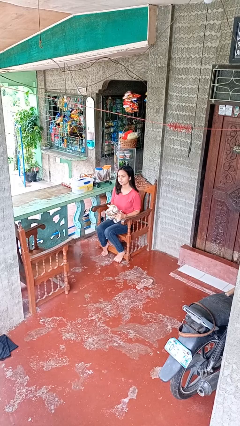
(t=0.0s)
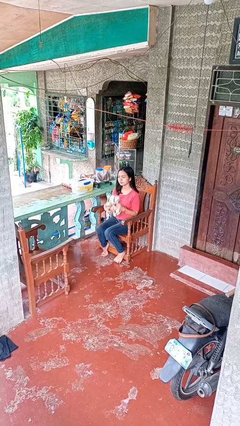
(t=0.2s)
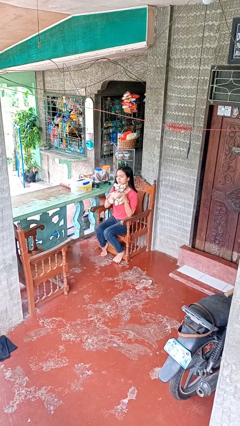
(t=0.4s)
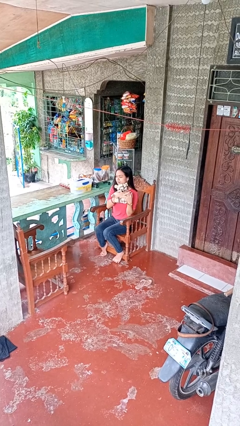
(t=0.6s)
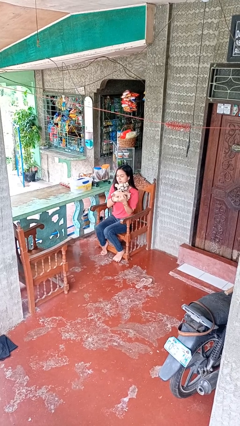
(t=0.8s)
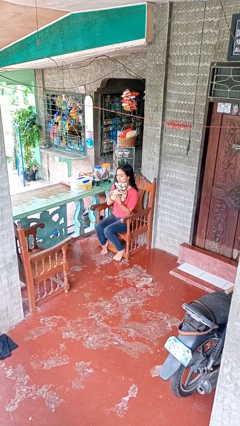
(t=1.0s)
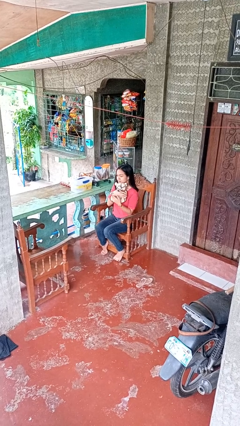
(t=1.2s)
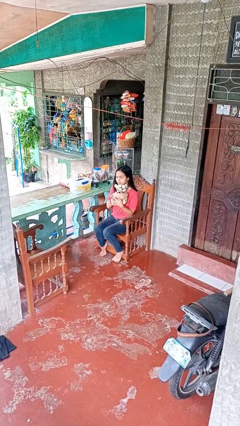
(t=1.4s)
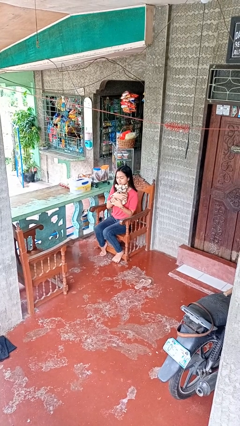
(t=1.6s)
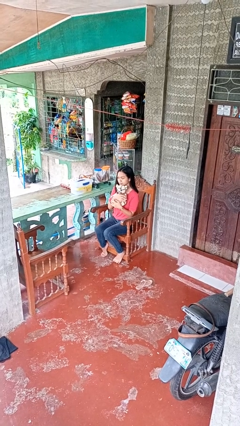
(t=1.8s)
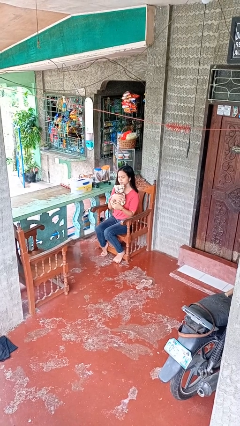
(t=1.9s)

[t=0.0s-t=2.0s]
person hugs stuffed animal

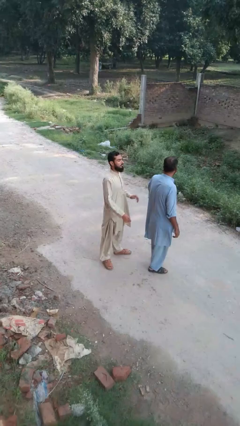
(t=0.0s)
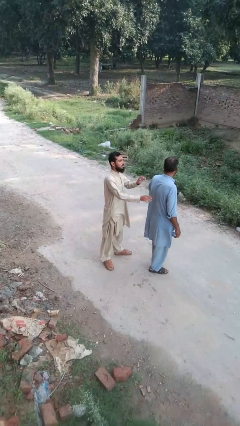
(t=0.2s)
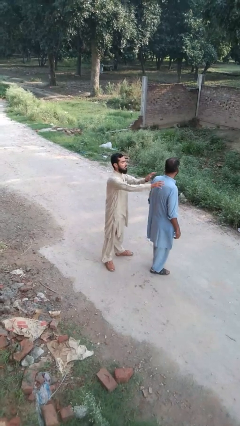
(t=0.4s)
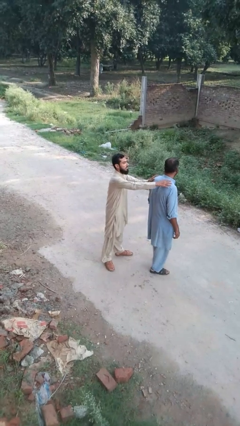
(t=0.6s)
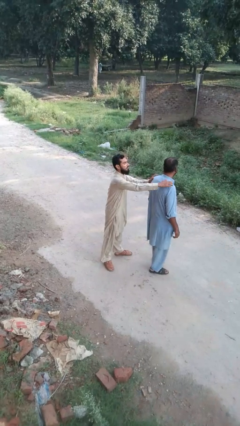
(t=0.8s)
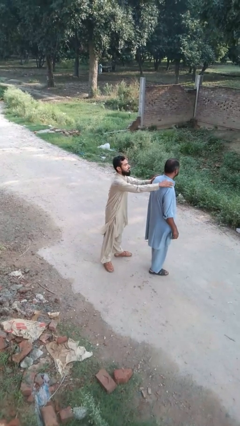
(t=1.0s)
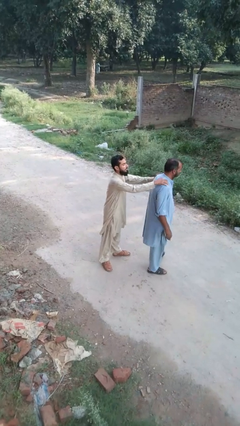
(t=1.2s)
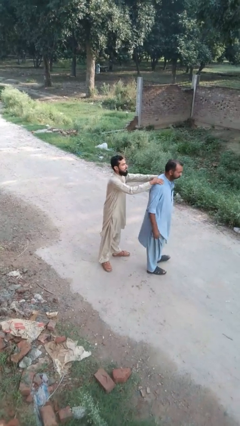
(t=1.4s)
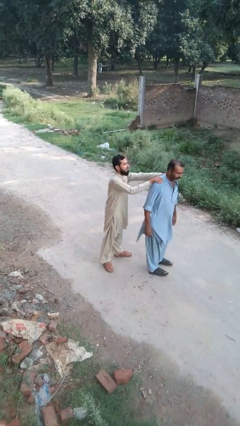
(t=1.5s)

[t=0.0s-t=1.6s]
person grabs person by shoulder

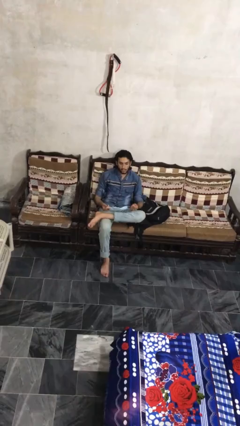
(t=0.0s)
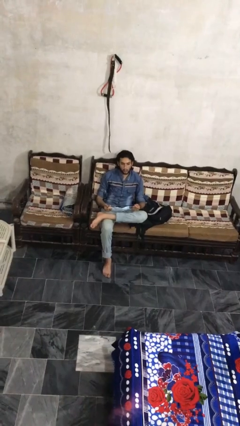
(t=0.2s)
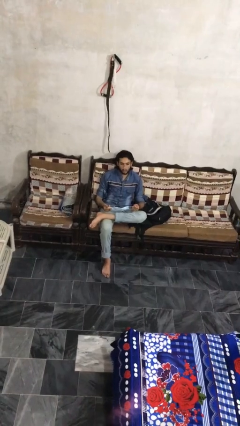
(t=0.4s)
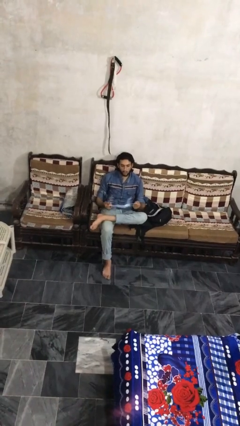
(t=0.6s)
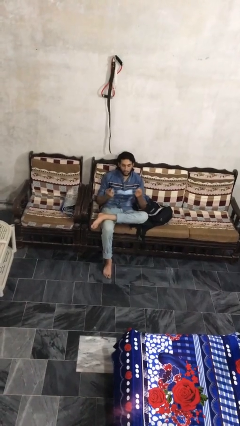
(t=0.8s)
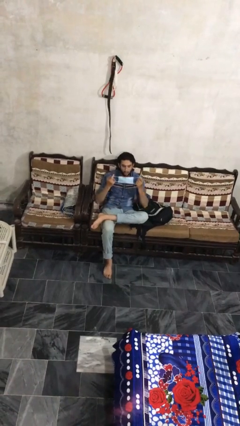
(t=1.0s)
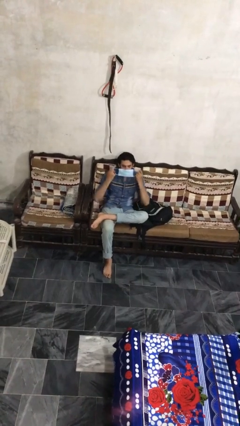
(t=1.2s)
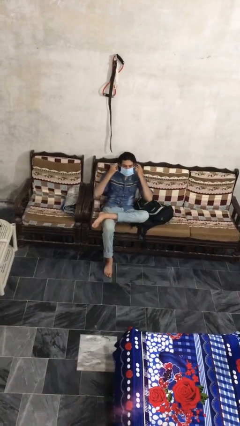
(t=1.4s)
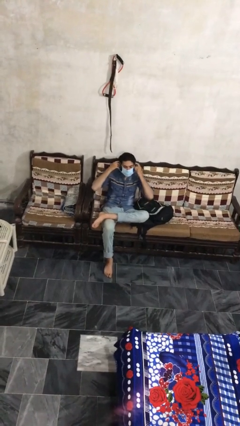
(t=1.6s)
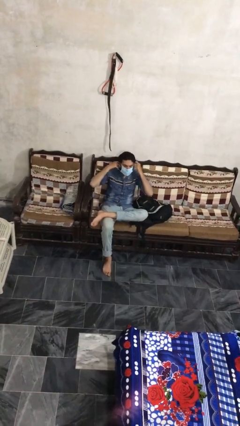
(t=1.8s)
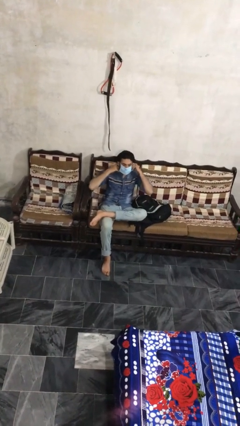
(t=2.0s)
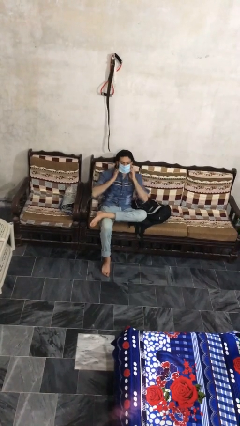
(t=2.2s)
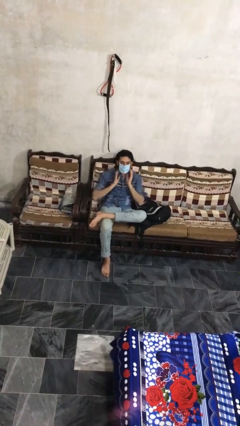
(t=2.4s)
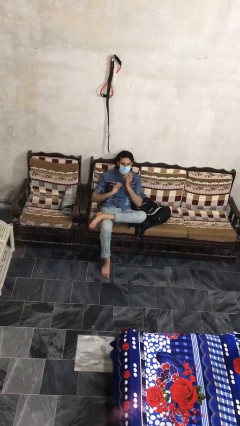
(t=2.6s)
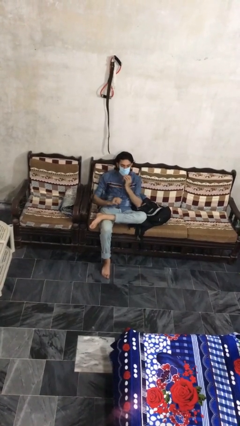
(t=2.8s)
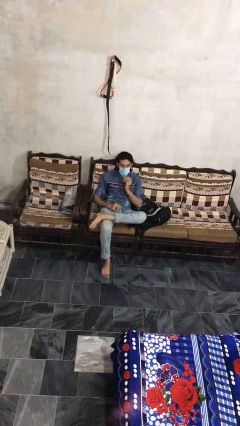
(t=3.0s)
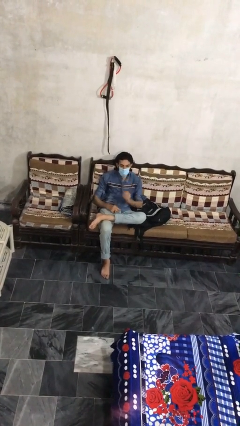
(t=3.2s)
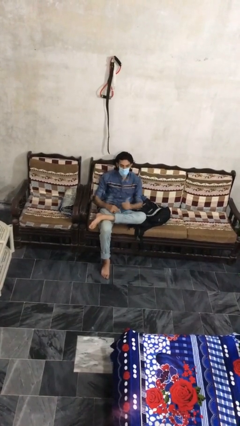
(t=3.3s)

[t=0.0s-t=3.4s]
person puts on facemask

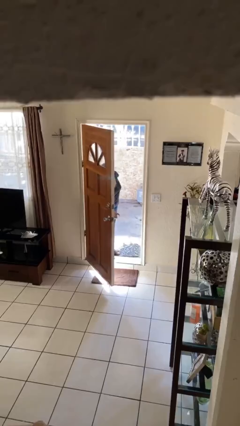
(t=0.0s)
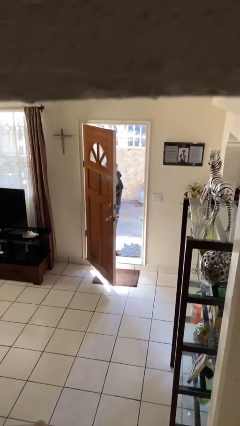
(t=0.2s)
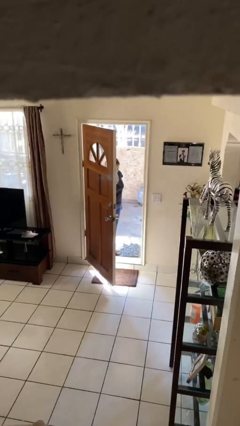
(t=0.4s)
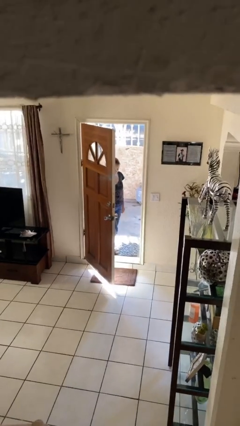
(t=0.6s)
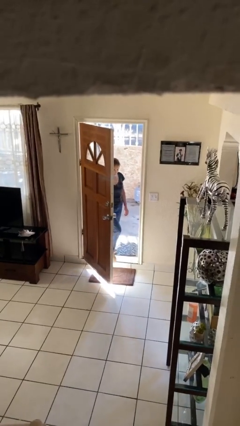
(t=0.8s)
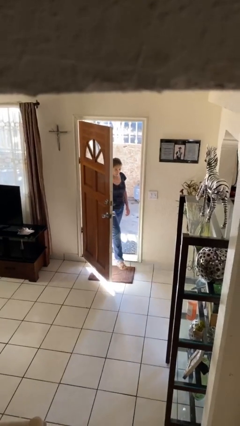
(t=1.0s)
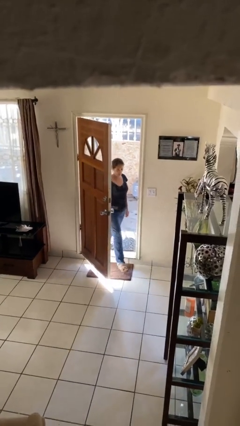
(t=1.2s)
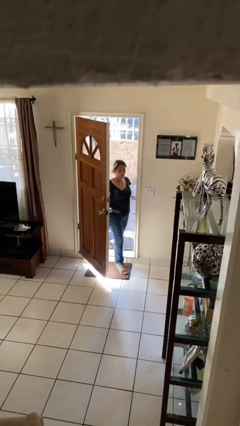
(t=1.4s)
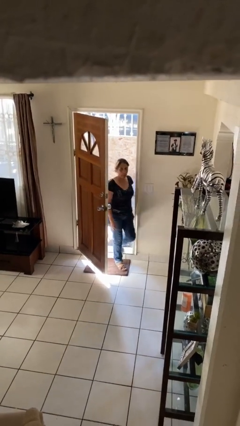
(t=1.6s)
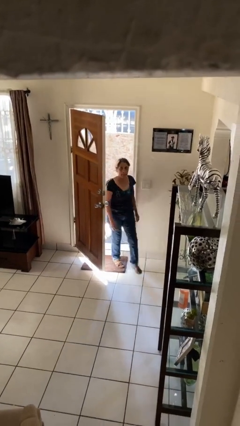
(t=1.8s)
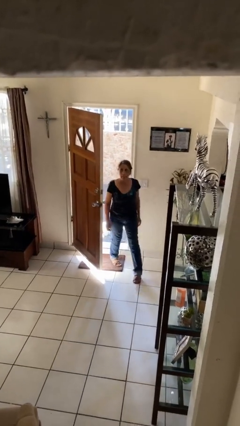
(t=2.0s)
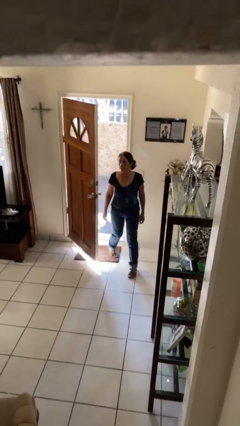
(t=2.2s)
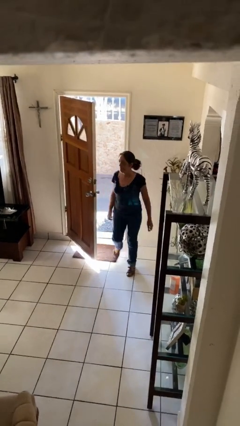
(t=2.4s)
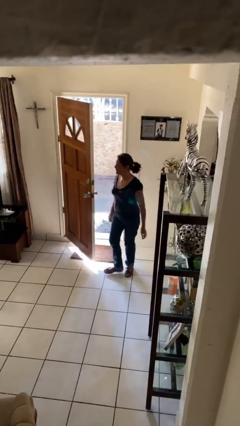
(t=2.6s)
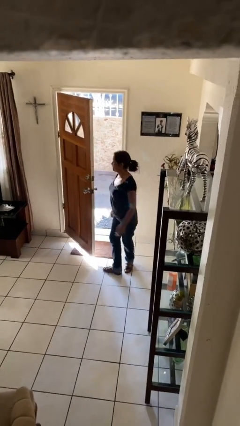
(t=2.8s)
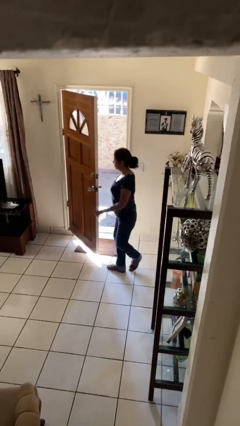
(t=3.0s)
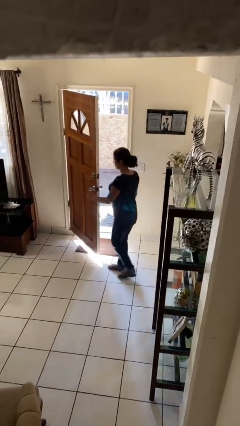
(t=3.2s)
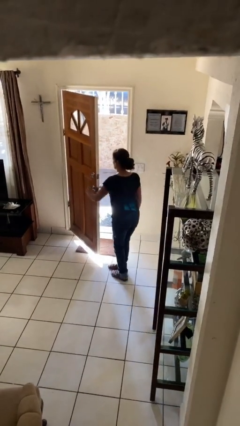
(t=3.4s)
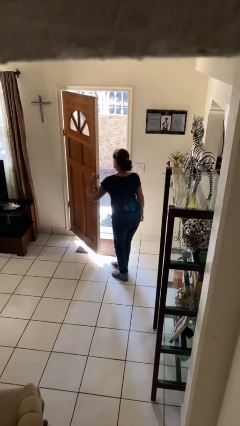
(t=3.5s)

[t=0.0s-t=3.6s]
person enters scene through structure

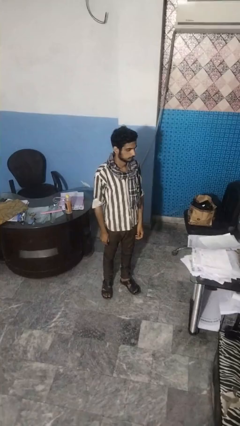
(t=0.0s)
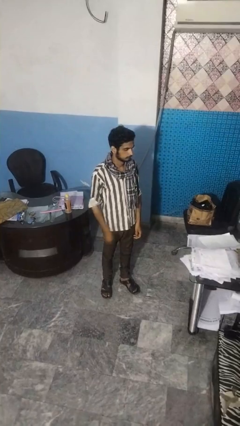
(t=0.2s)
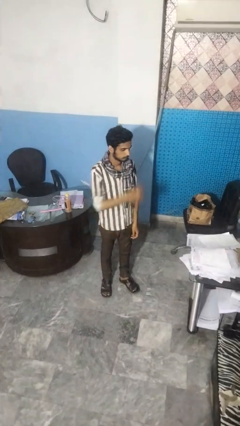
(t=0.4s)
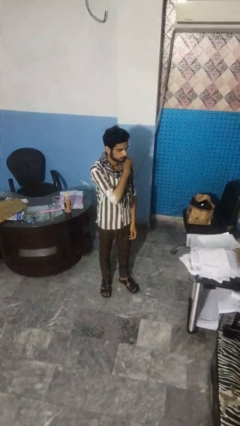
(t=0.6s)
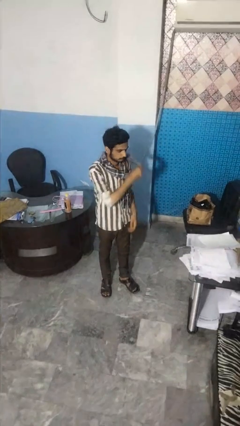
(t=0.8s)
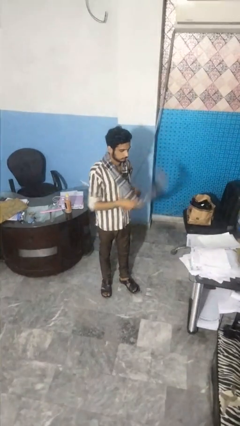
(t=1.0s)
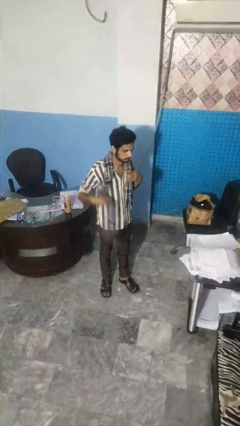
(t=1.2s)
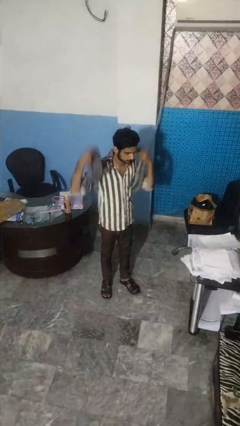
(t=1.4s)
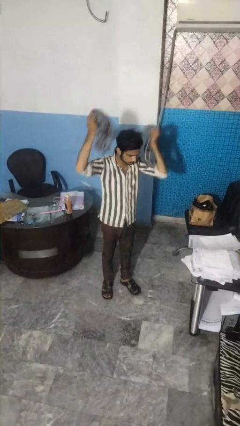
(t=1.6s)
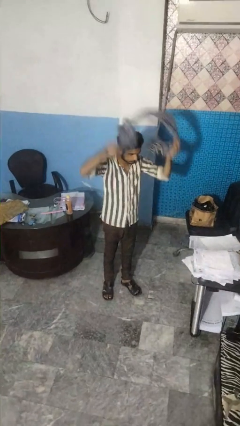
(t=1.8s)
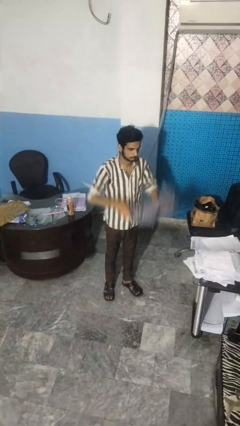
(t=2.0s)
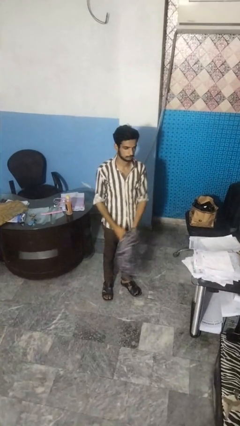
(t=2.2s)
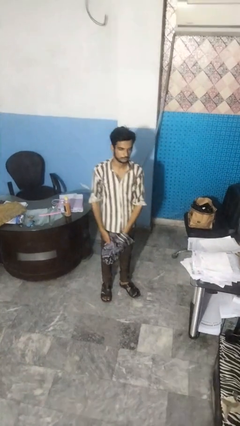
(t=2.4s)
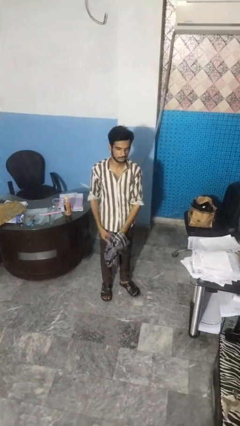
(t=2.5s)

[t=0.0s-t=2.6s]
person takes off scarf

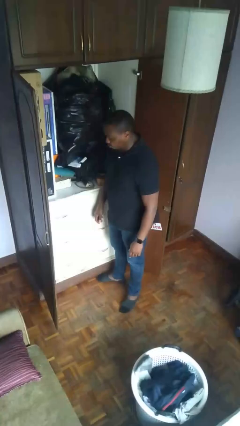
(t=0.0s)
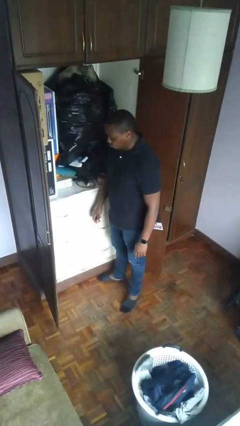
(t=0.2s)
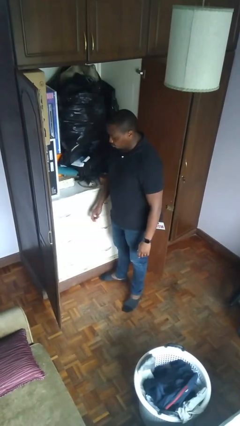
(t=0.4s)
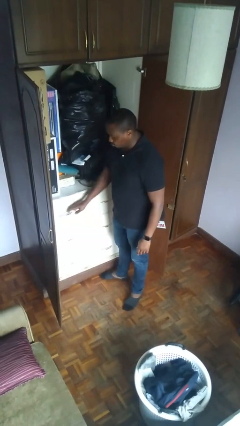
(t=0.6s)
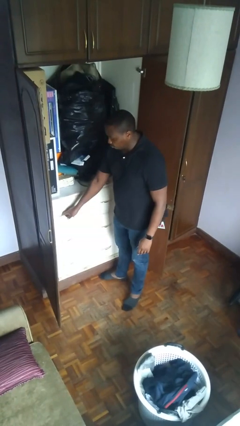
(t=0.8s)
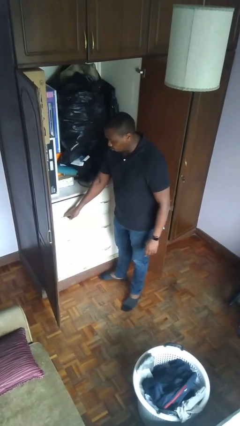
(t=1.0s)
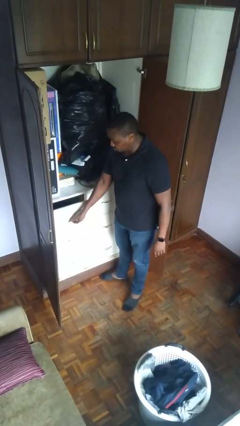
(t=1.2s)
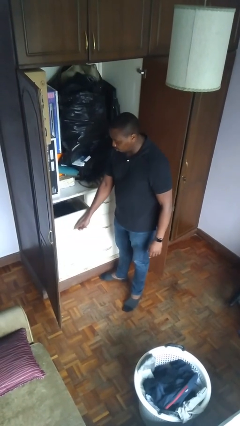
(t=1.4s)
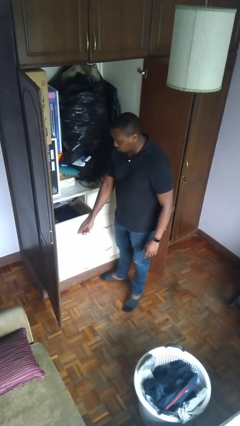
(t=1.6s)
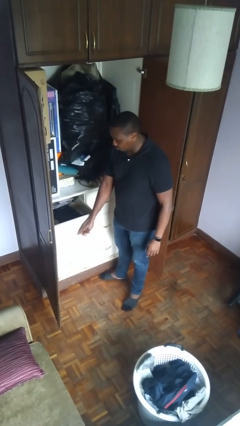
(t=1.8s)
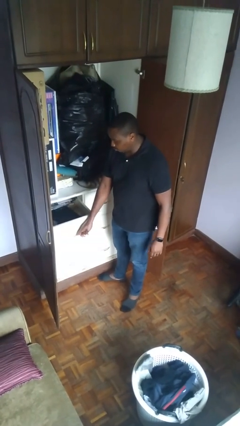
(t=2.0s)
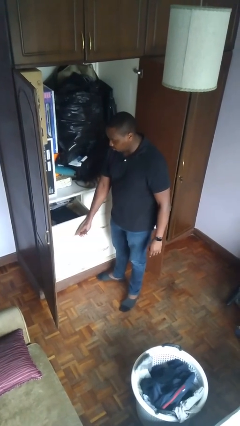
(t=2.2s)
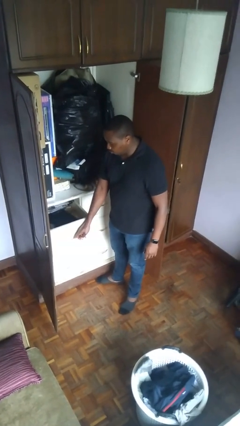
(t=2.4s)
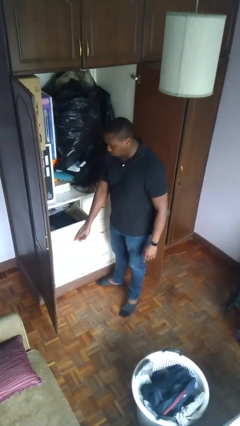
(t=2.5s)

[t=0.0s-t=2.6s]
person opens dresser drawer

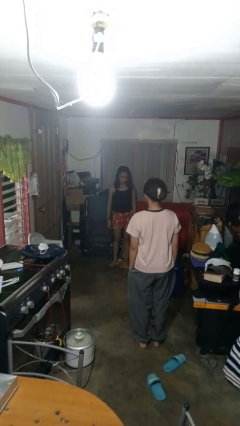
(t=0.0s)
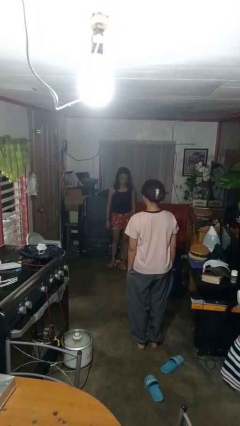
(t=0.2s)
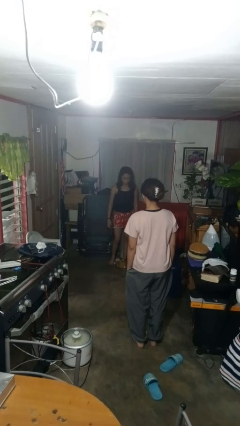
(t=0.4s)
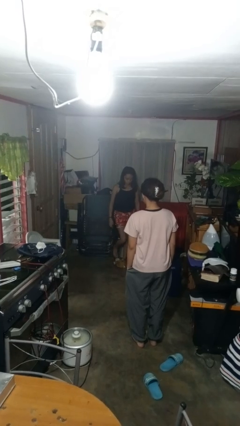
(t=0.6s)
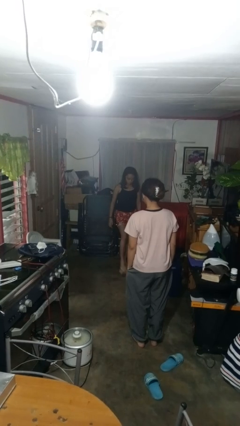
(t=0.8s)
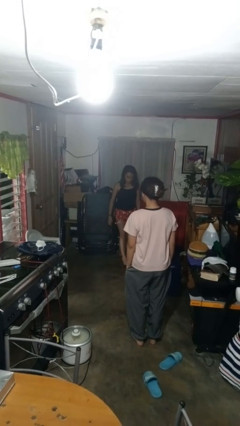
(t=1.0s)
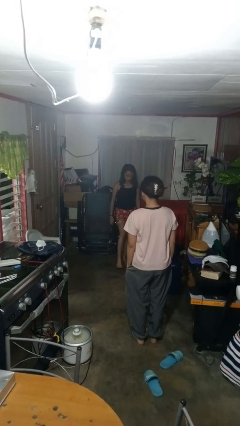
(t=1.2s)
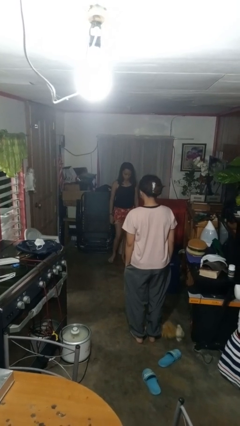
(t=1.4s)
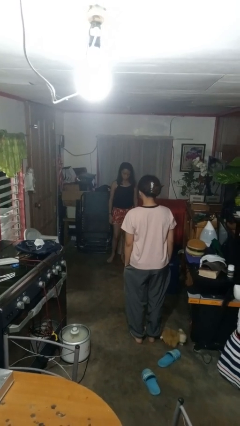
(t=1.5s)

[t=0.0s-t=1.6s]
person kicks object to person
